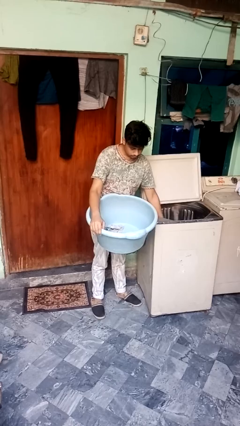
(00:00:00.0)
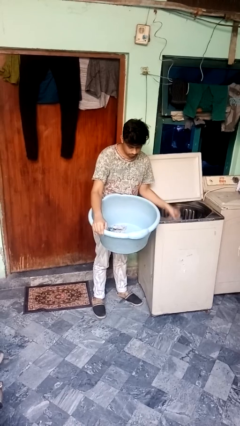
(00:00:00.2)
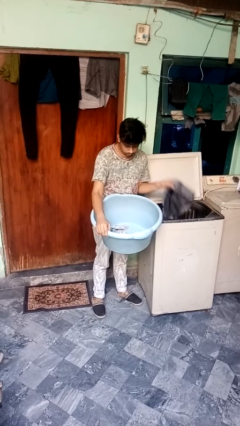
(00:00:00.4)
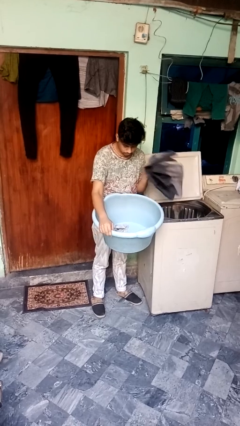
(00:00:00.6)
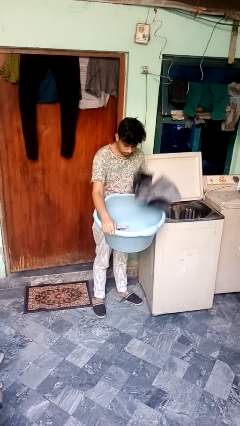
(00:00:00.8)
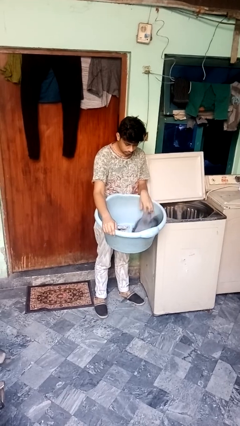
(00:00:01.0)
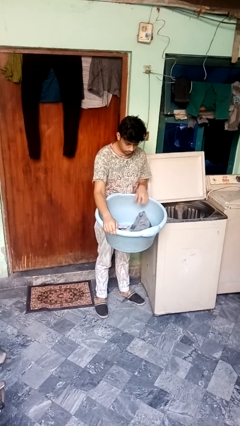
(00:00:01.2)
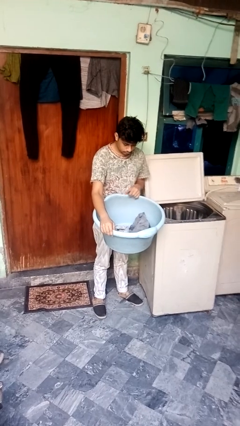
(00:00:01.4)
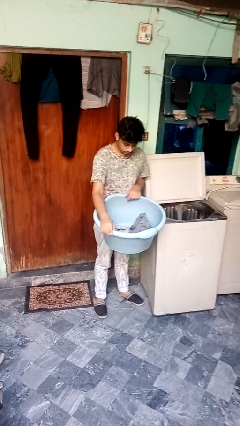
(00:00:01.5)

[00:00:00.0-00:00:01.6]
person loads clotheswasher

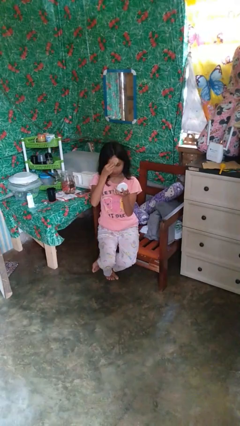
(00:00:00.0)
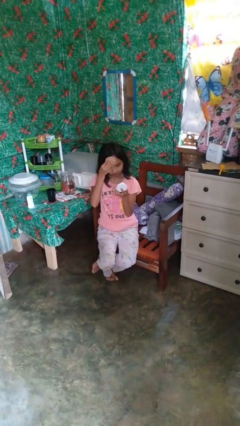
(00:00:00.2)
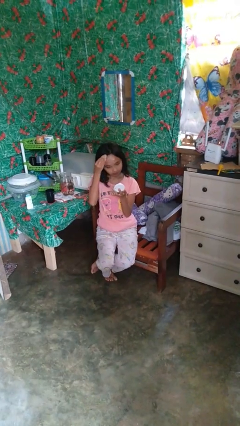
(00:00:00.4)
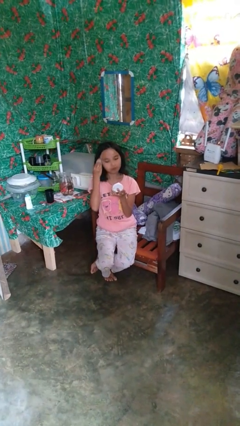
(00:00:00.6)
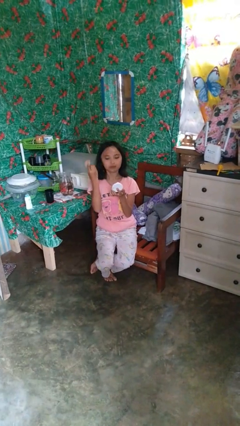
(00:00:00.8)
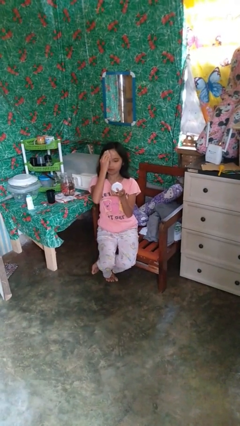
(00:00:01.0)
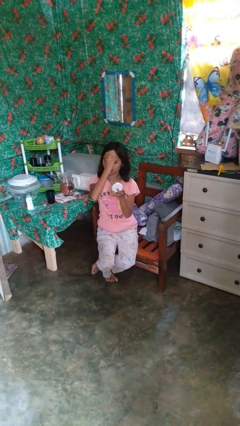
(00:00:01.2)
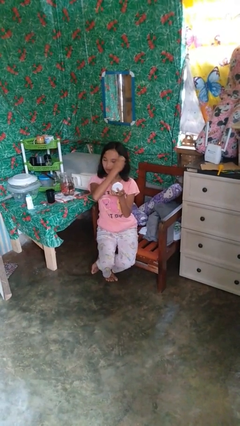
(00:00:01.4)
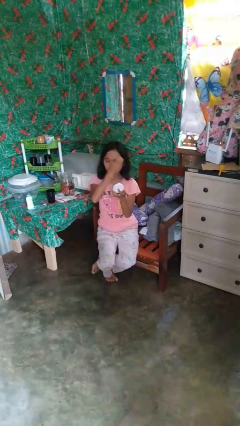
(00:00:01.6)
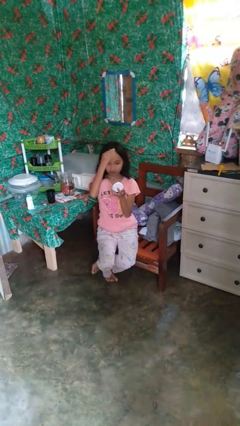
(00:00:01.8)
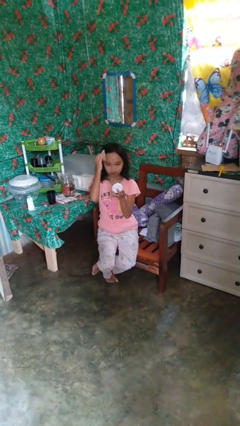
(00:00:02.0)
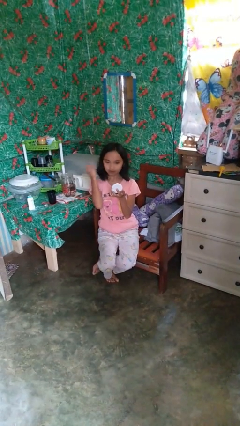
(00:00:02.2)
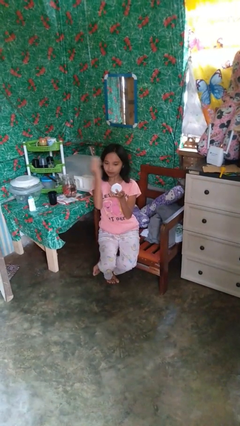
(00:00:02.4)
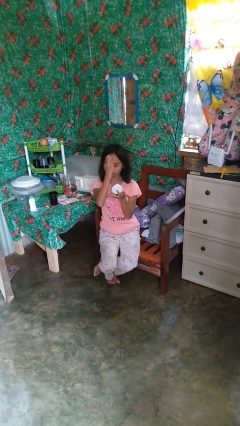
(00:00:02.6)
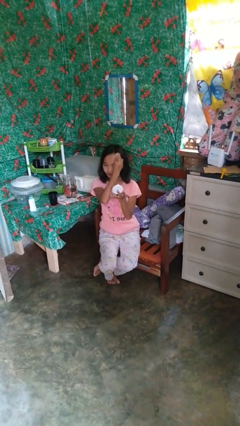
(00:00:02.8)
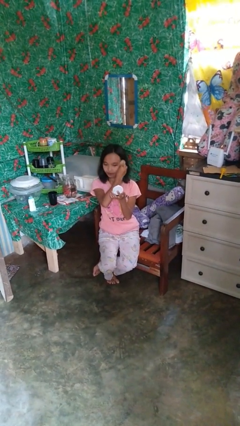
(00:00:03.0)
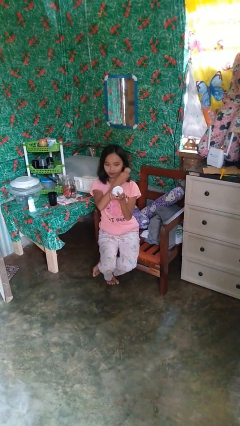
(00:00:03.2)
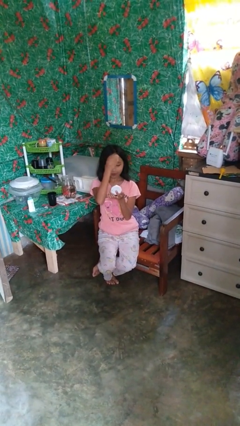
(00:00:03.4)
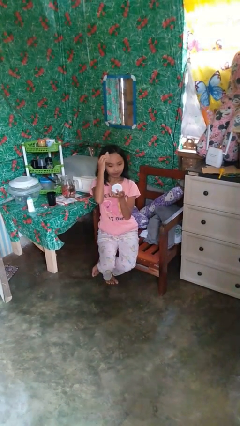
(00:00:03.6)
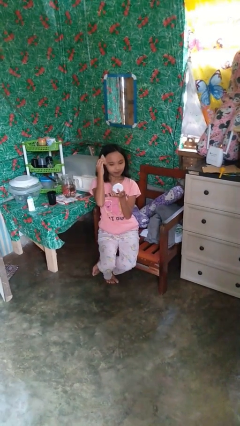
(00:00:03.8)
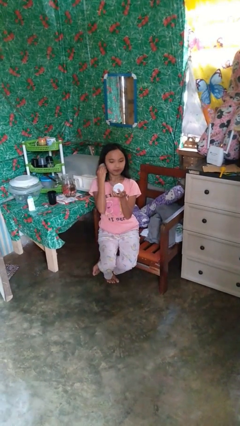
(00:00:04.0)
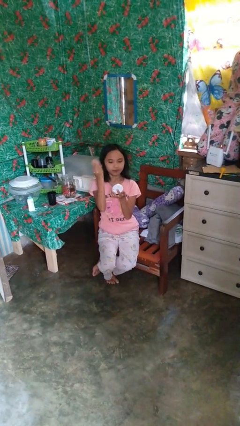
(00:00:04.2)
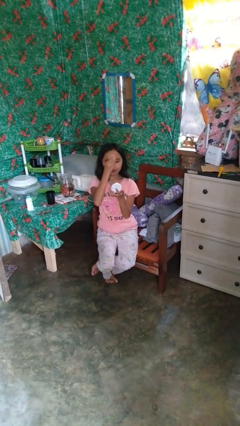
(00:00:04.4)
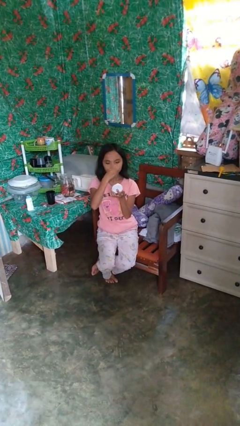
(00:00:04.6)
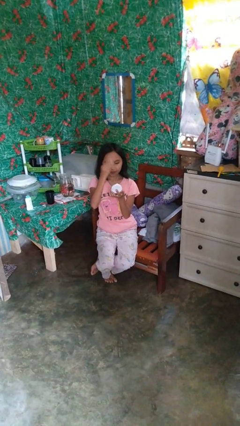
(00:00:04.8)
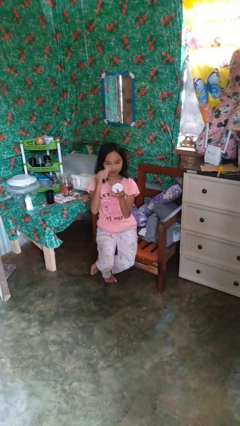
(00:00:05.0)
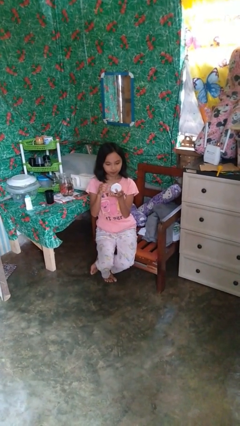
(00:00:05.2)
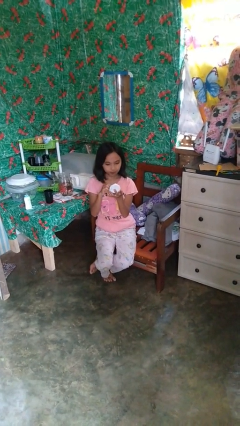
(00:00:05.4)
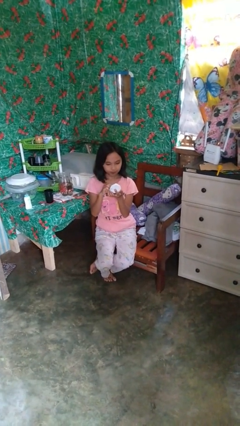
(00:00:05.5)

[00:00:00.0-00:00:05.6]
person applies foundation makeup

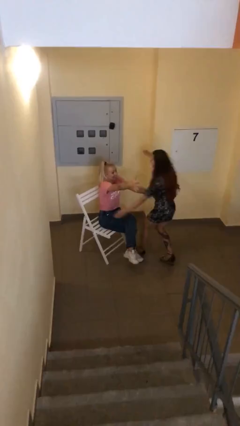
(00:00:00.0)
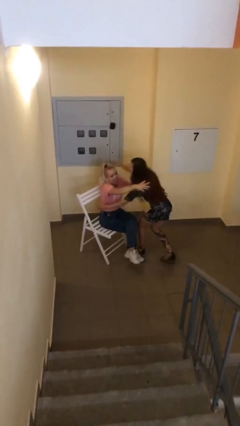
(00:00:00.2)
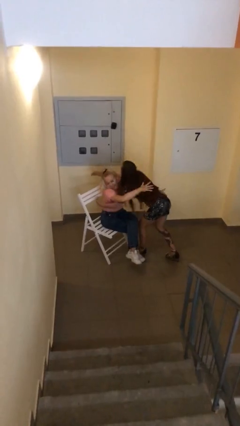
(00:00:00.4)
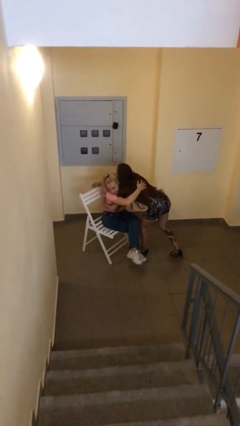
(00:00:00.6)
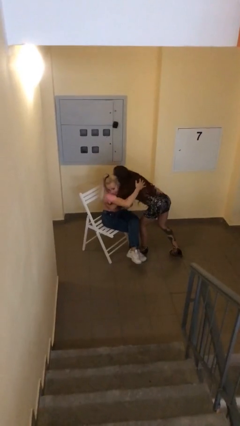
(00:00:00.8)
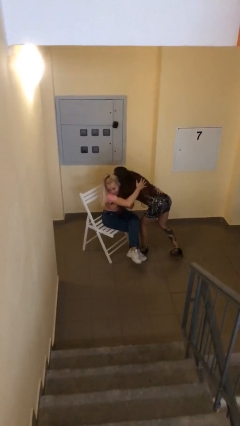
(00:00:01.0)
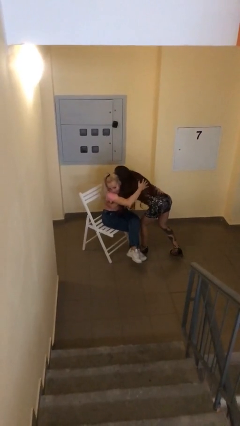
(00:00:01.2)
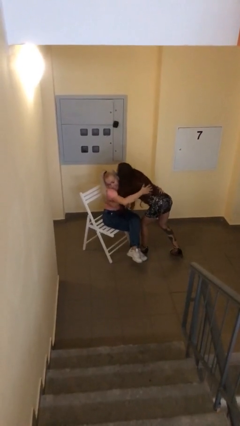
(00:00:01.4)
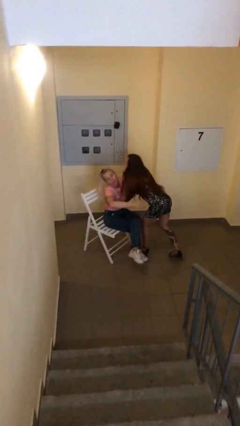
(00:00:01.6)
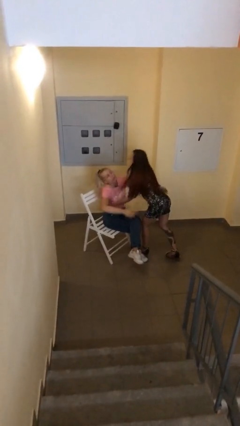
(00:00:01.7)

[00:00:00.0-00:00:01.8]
person embraces person

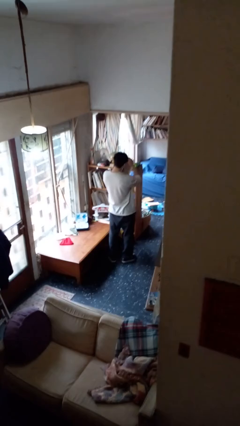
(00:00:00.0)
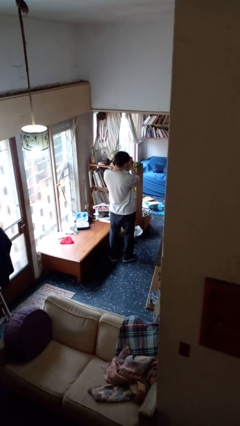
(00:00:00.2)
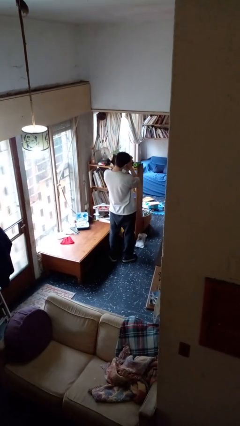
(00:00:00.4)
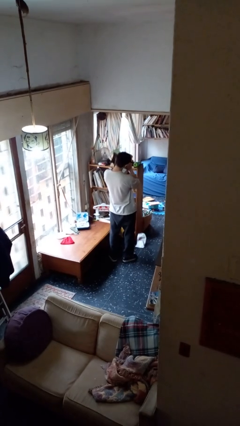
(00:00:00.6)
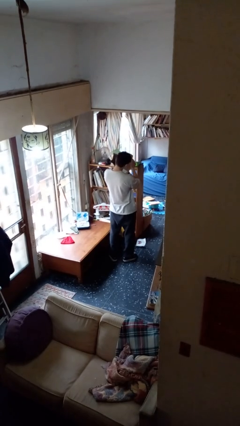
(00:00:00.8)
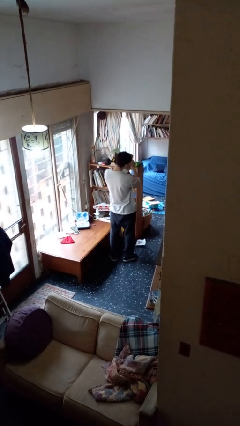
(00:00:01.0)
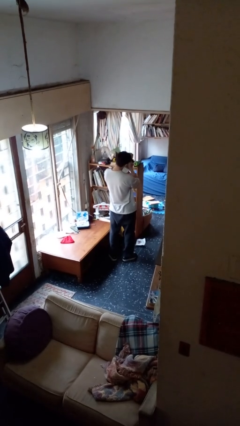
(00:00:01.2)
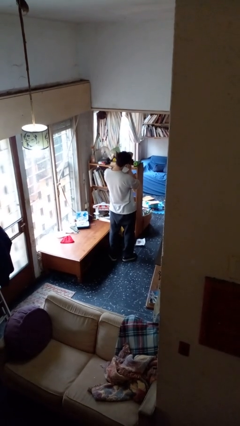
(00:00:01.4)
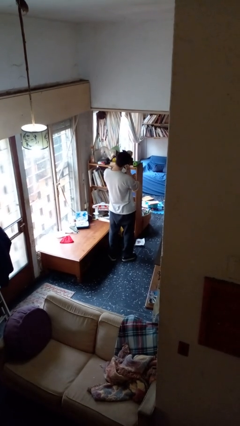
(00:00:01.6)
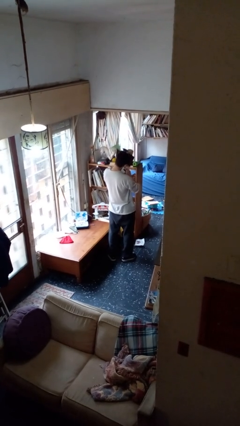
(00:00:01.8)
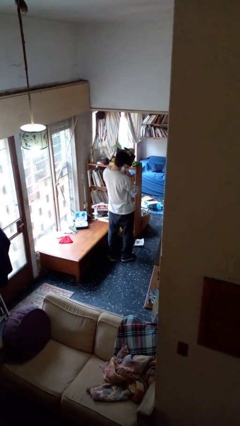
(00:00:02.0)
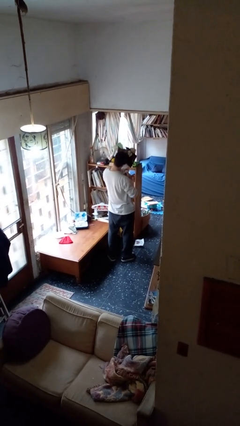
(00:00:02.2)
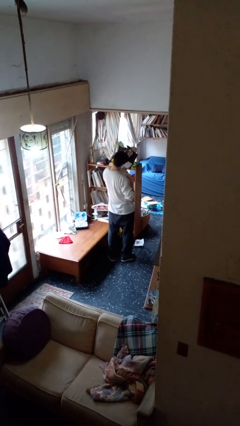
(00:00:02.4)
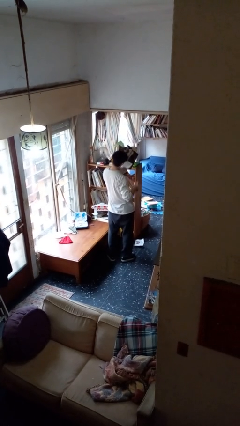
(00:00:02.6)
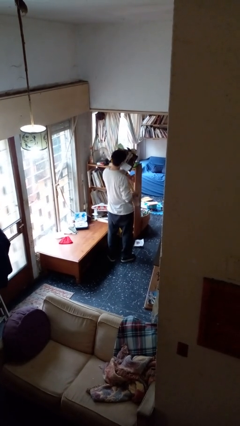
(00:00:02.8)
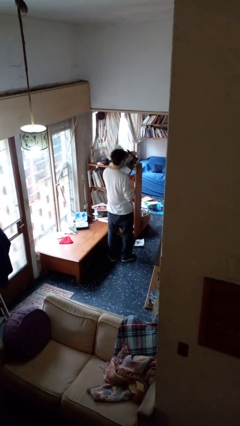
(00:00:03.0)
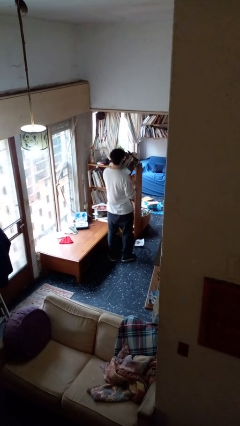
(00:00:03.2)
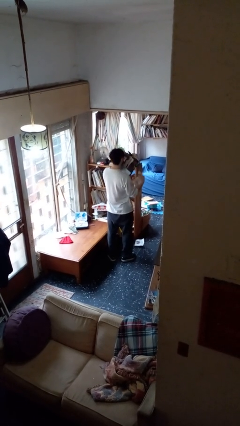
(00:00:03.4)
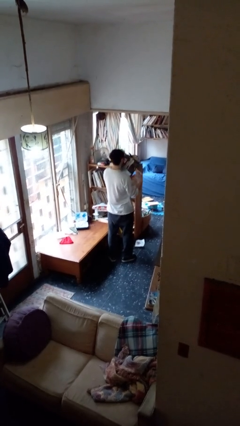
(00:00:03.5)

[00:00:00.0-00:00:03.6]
person tears paper

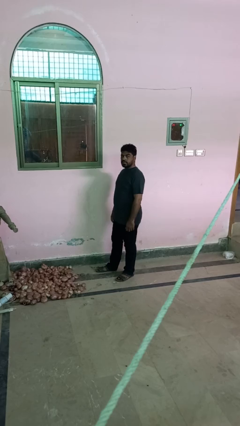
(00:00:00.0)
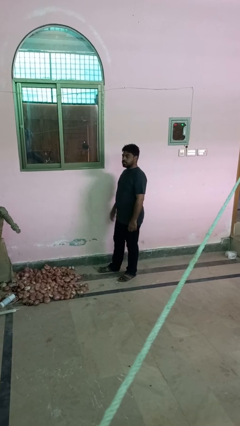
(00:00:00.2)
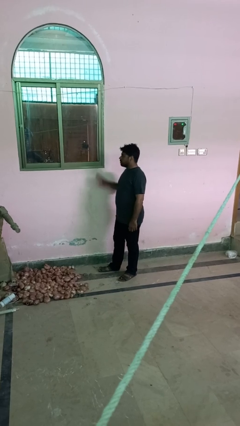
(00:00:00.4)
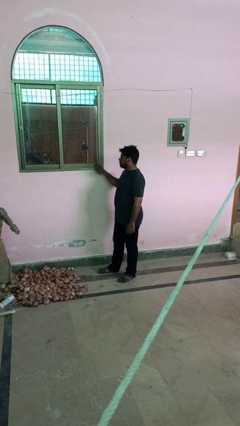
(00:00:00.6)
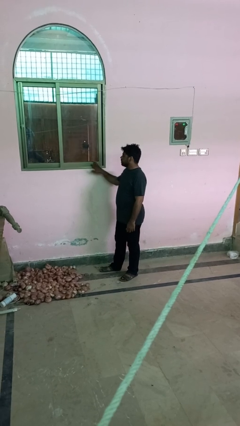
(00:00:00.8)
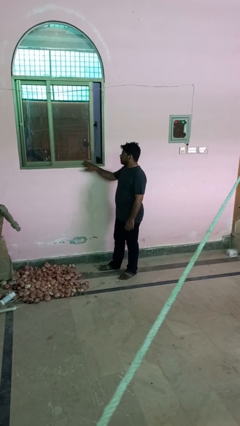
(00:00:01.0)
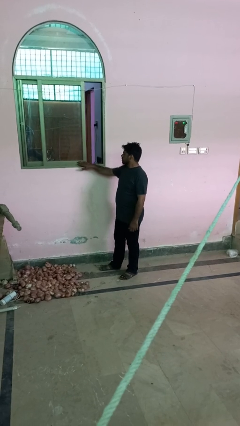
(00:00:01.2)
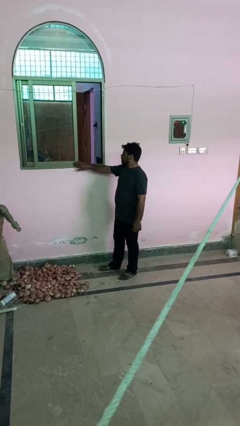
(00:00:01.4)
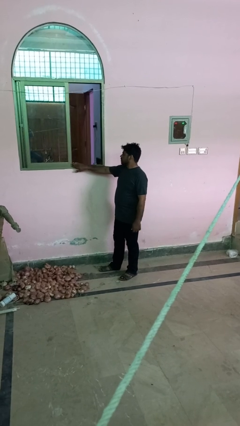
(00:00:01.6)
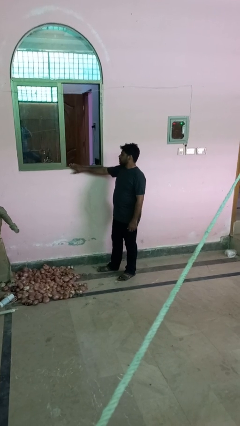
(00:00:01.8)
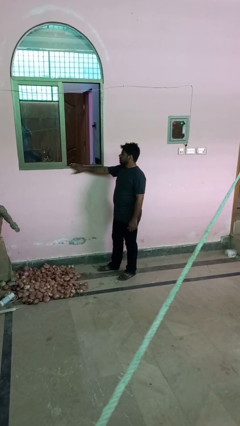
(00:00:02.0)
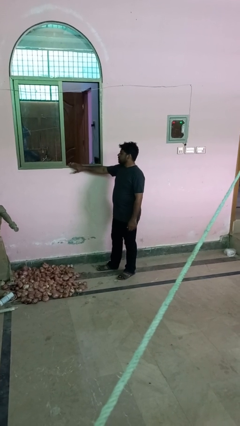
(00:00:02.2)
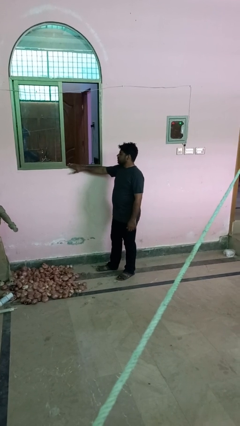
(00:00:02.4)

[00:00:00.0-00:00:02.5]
person opens sliding door

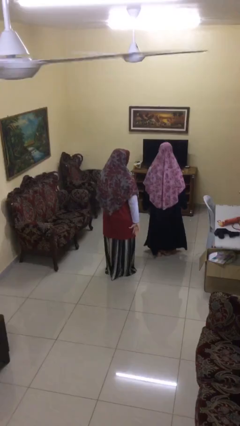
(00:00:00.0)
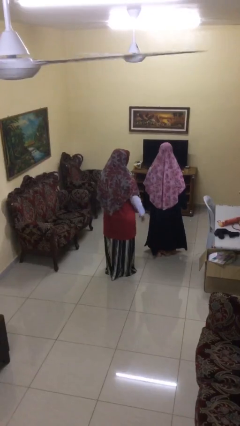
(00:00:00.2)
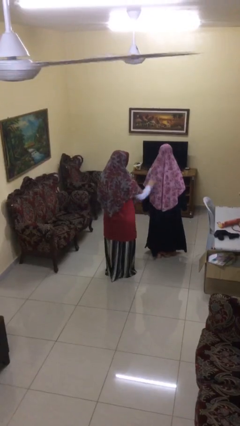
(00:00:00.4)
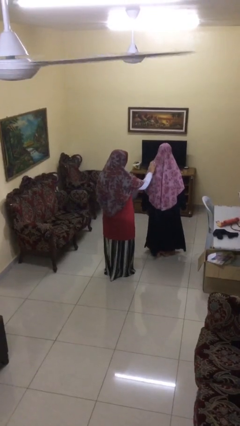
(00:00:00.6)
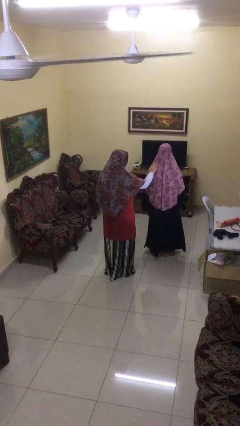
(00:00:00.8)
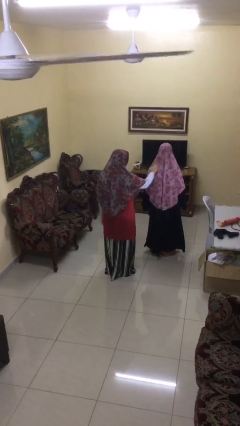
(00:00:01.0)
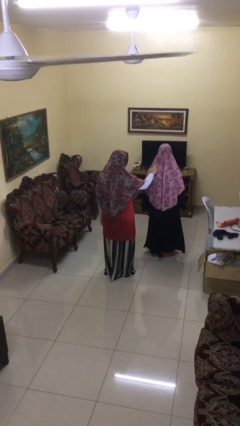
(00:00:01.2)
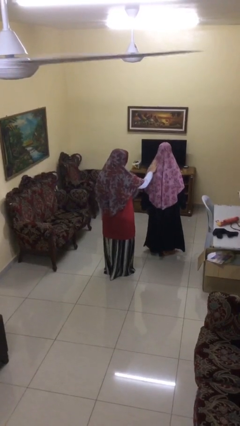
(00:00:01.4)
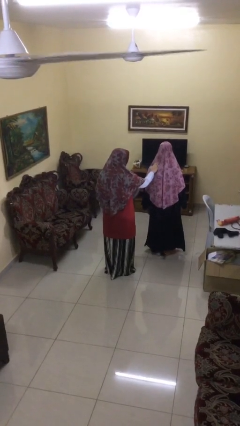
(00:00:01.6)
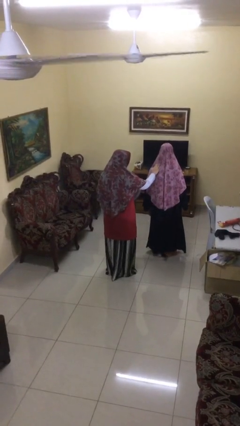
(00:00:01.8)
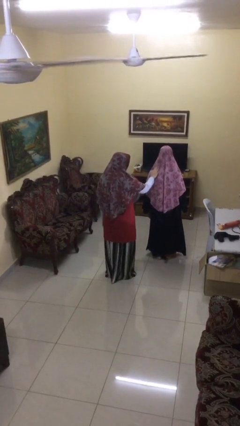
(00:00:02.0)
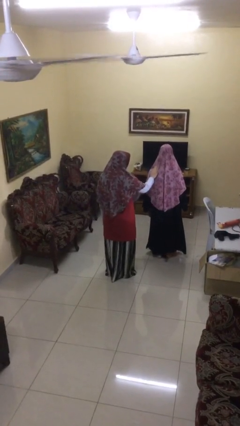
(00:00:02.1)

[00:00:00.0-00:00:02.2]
person touches back of person
